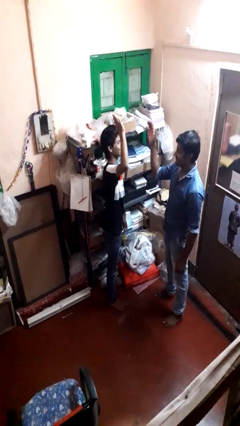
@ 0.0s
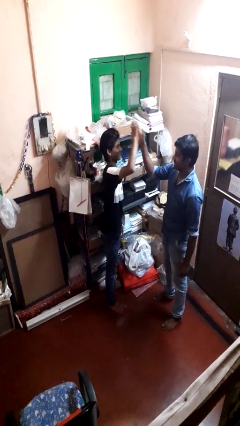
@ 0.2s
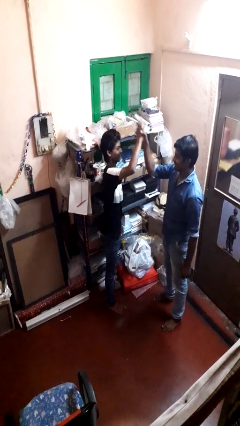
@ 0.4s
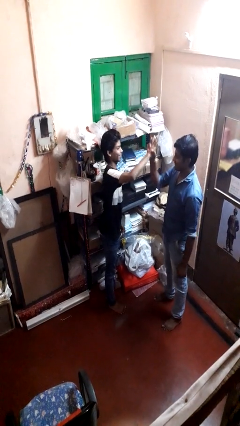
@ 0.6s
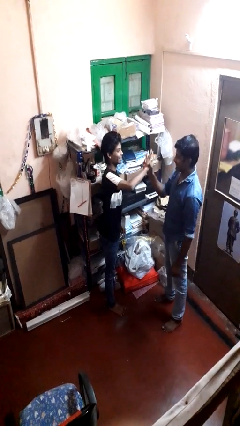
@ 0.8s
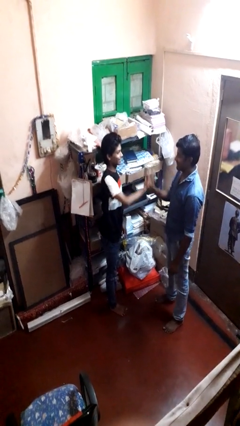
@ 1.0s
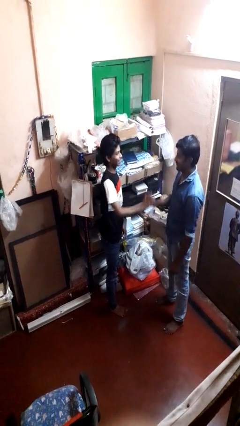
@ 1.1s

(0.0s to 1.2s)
person highfives hand

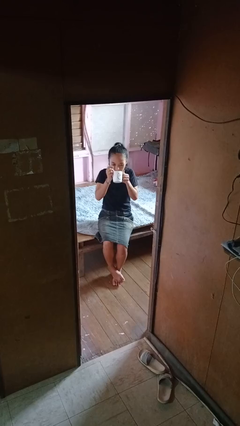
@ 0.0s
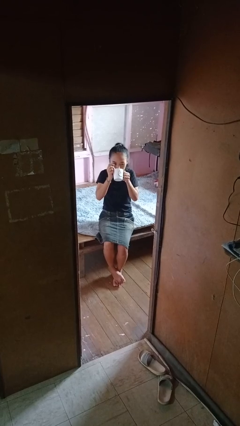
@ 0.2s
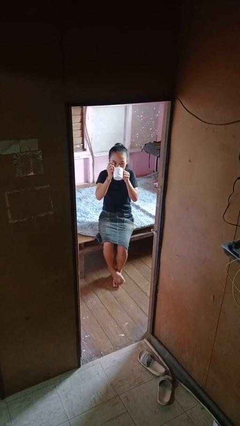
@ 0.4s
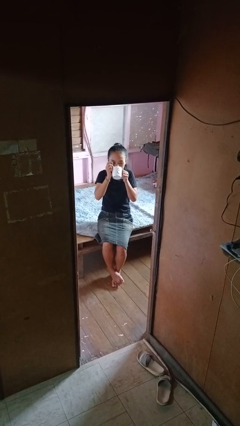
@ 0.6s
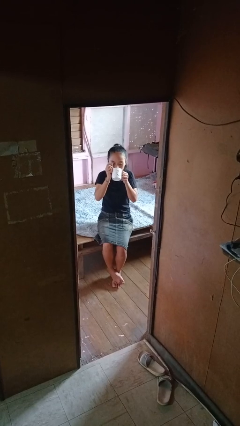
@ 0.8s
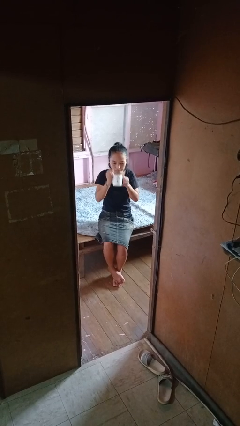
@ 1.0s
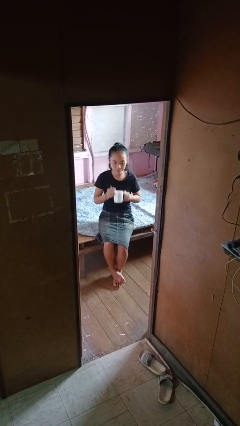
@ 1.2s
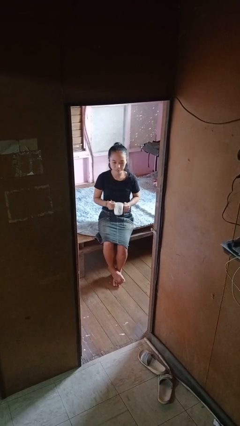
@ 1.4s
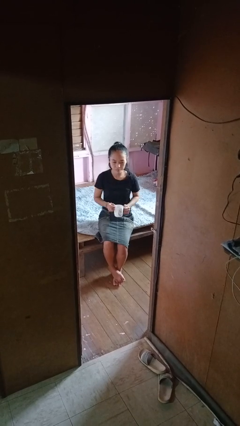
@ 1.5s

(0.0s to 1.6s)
person drinks from mug

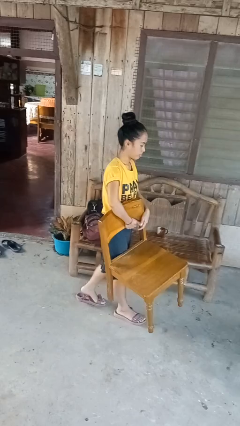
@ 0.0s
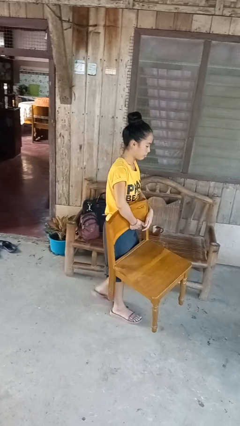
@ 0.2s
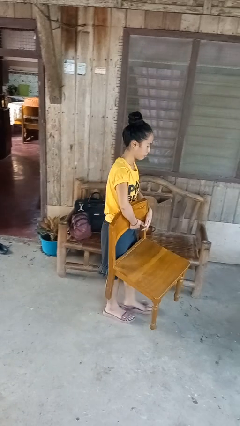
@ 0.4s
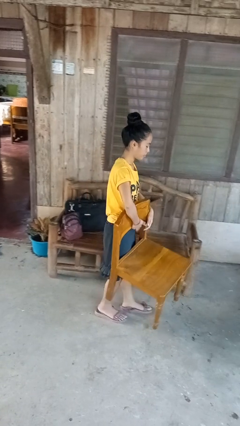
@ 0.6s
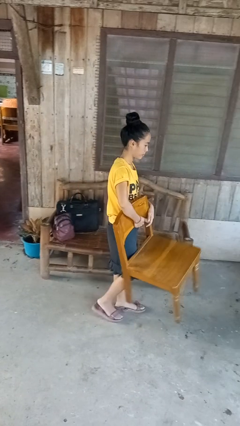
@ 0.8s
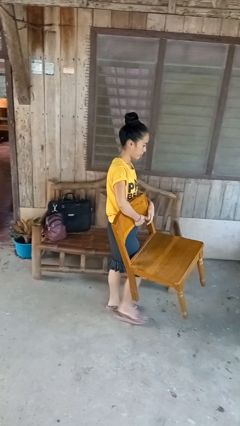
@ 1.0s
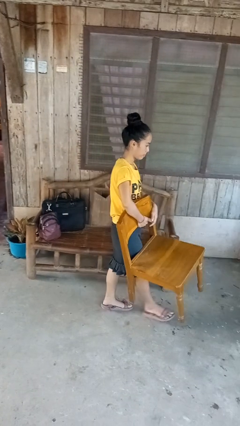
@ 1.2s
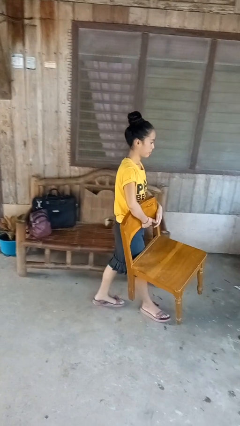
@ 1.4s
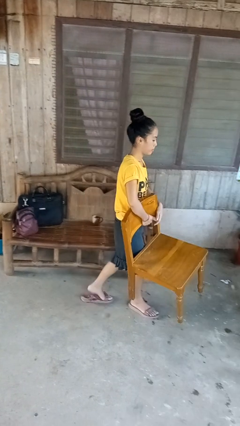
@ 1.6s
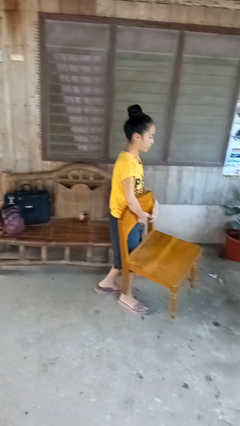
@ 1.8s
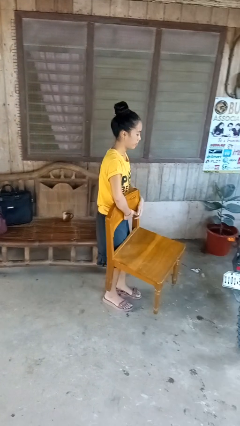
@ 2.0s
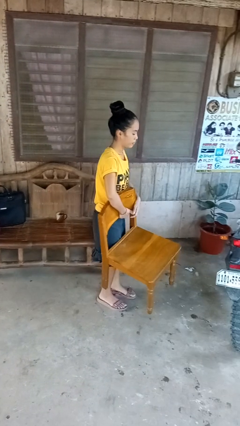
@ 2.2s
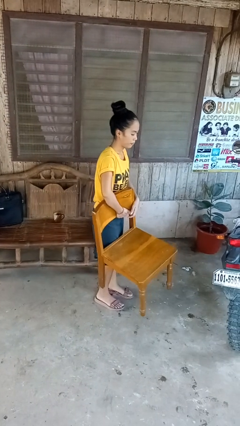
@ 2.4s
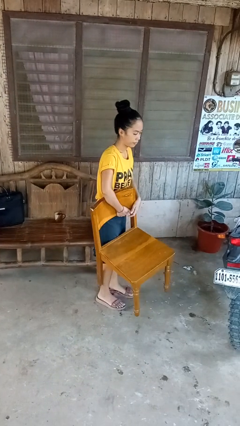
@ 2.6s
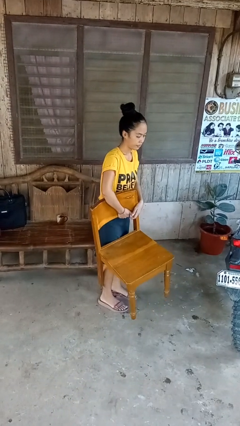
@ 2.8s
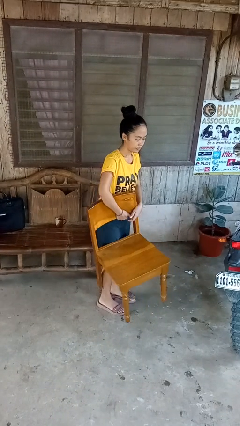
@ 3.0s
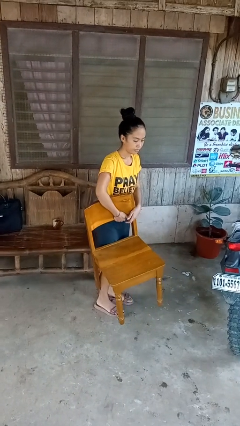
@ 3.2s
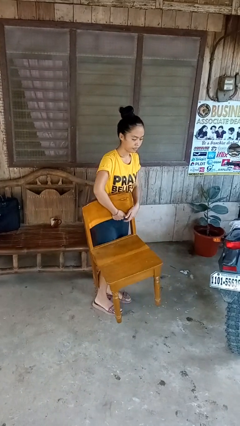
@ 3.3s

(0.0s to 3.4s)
person carries furniture

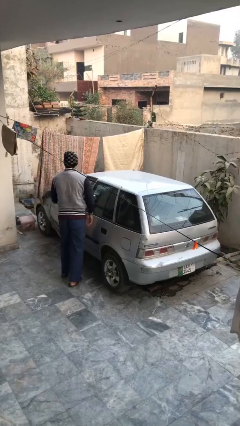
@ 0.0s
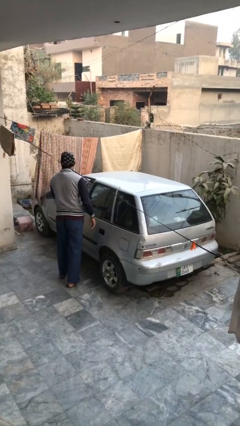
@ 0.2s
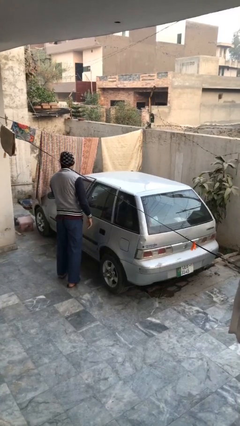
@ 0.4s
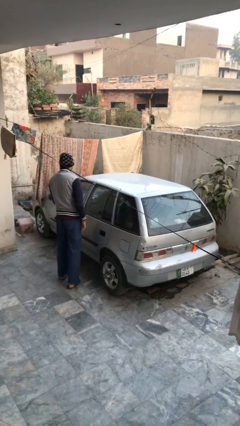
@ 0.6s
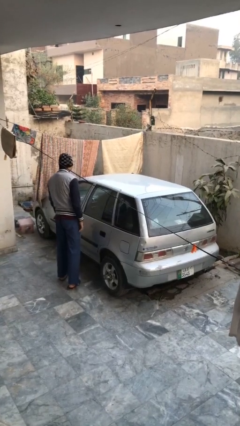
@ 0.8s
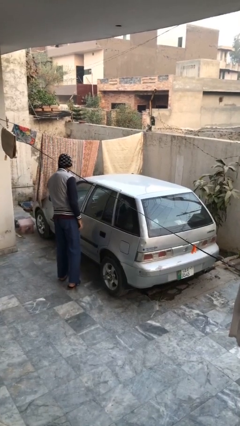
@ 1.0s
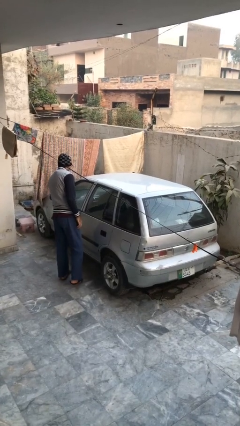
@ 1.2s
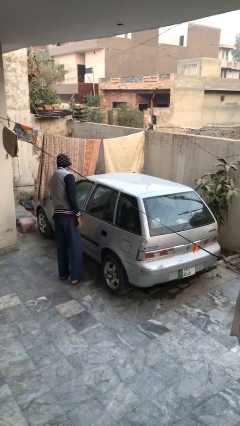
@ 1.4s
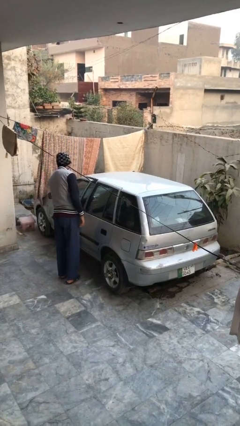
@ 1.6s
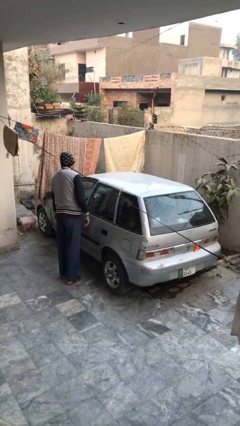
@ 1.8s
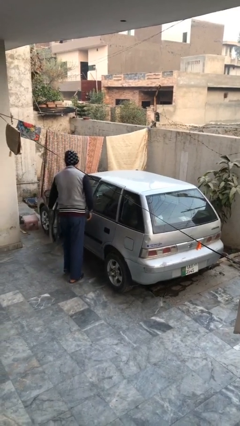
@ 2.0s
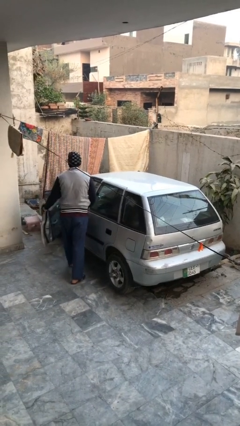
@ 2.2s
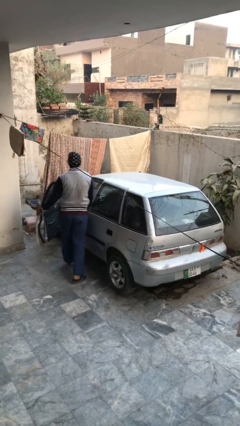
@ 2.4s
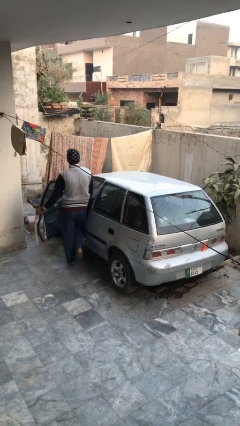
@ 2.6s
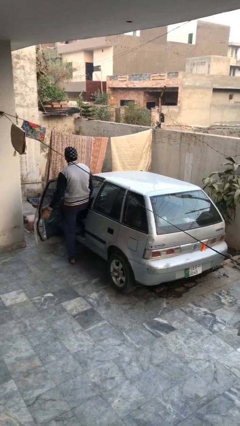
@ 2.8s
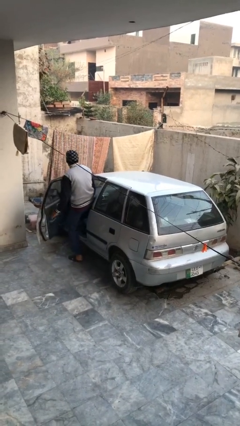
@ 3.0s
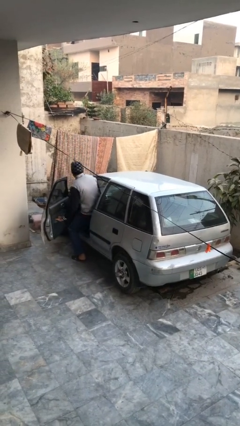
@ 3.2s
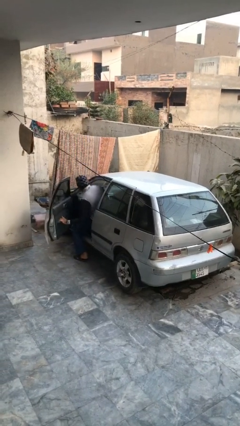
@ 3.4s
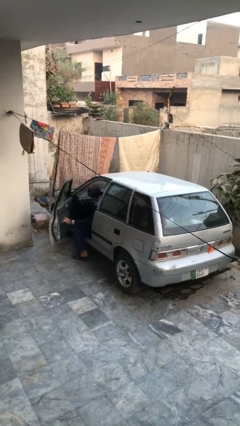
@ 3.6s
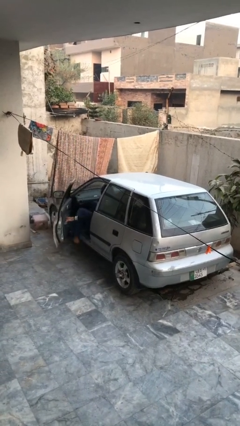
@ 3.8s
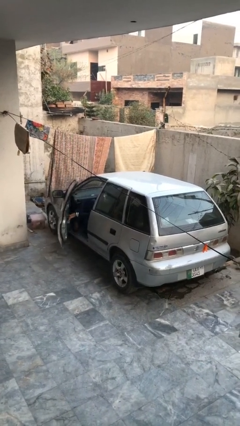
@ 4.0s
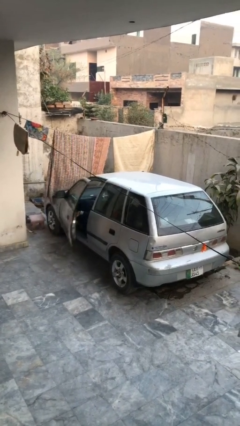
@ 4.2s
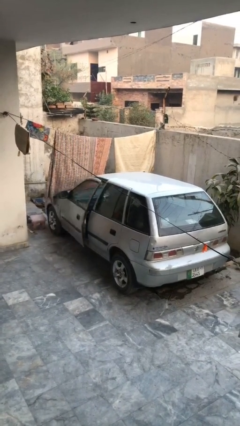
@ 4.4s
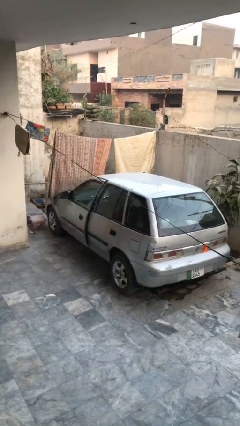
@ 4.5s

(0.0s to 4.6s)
car picks up person

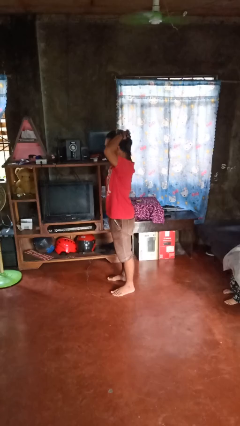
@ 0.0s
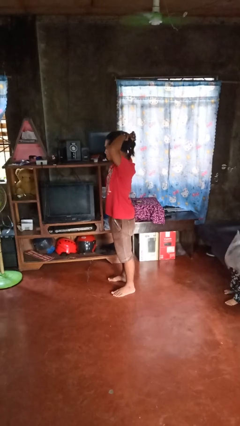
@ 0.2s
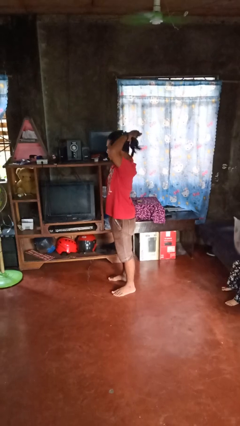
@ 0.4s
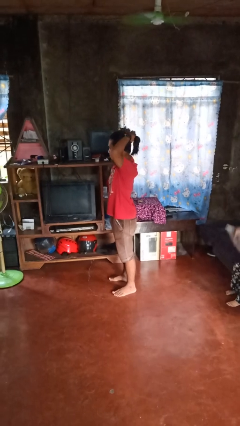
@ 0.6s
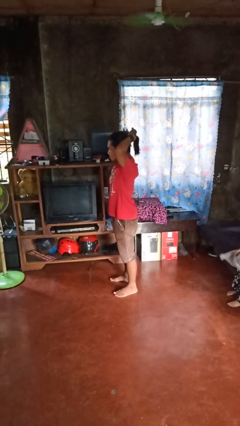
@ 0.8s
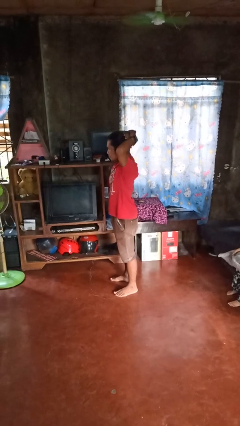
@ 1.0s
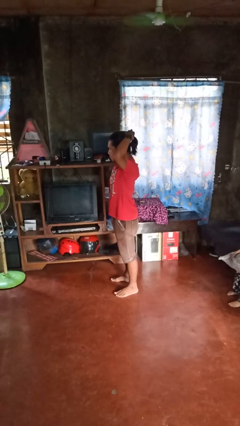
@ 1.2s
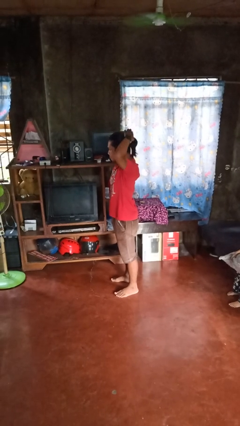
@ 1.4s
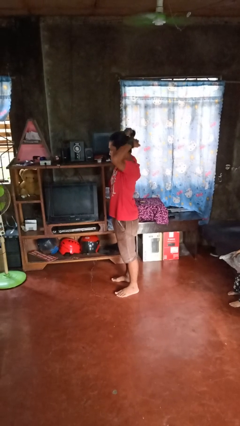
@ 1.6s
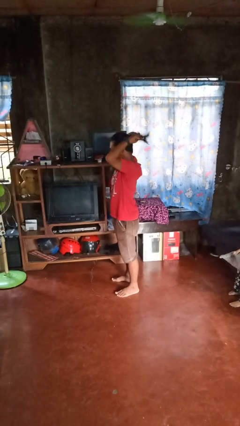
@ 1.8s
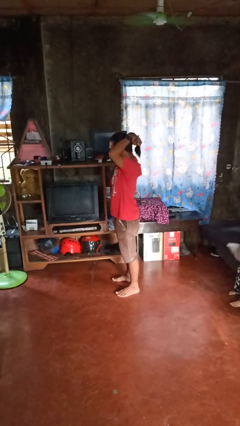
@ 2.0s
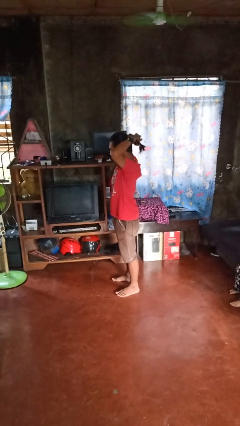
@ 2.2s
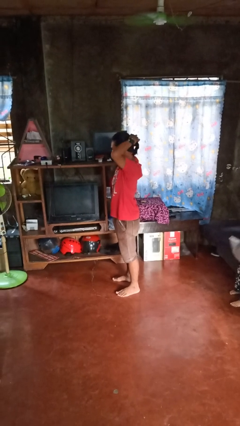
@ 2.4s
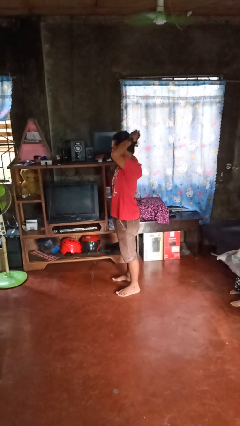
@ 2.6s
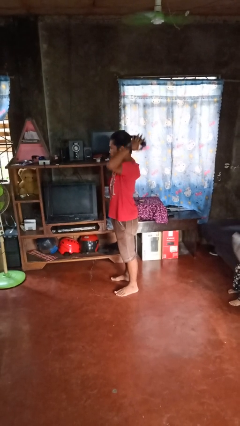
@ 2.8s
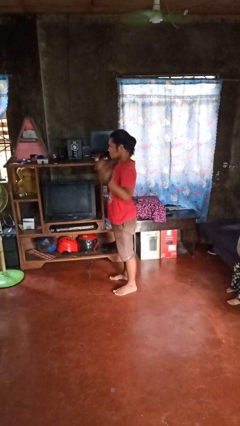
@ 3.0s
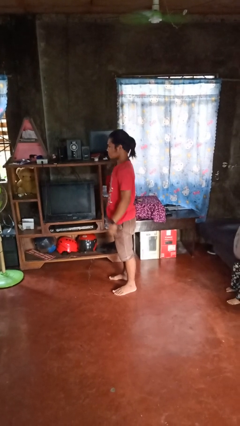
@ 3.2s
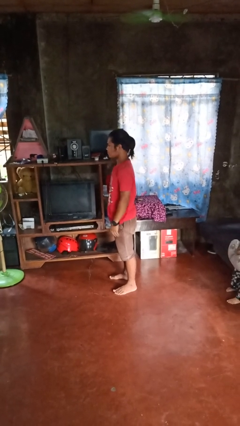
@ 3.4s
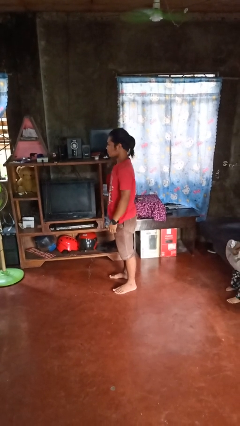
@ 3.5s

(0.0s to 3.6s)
person puts hair in ponytail

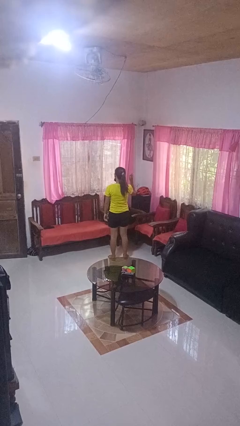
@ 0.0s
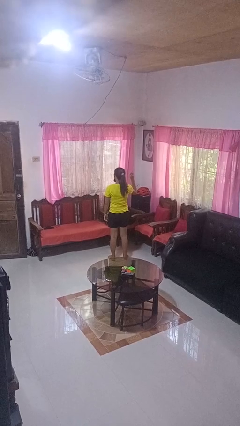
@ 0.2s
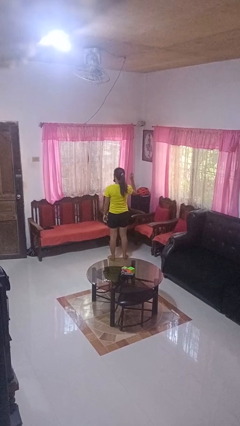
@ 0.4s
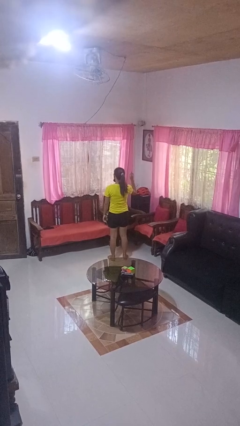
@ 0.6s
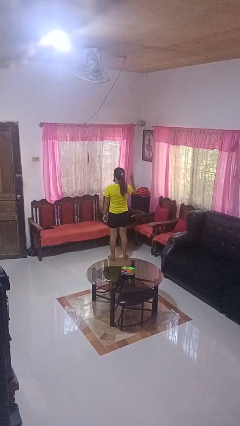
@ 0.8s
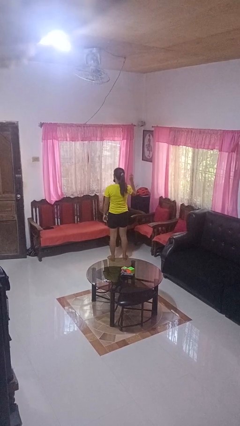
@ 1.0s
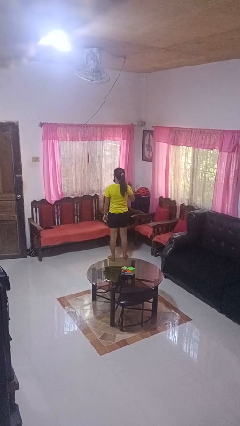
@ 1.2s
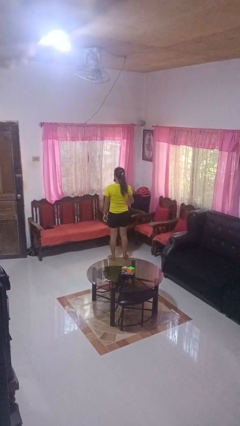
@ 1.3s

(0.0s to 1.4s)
person gestures number one

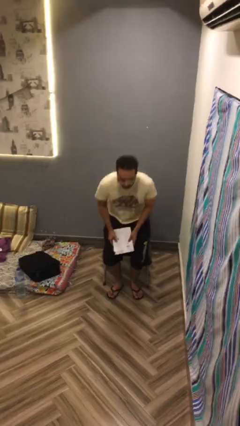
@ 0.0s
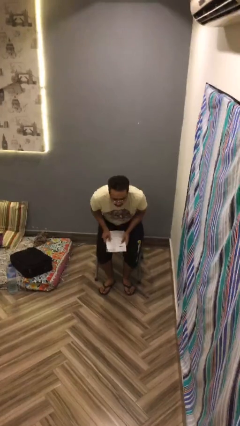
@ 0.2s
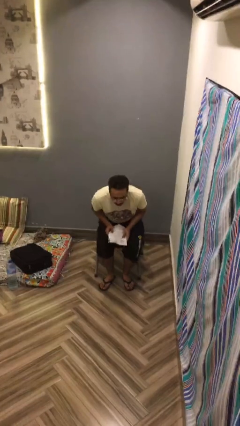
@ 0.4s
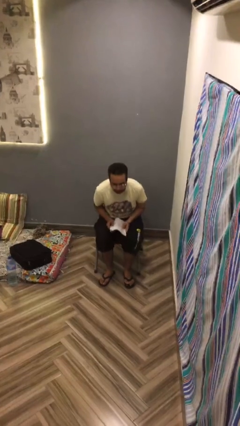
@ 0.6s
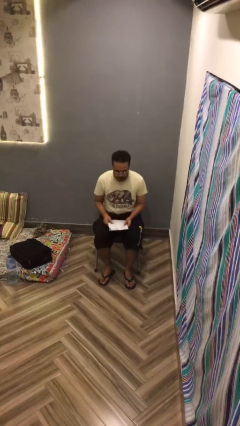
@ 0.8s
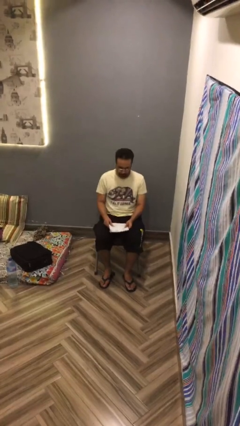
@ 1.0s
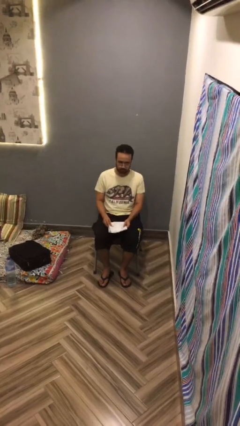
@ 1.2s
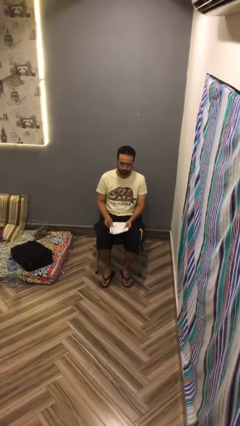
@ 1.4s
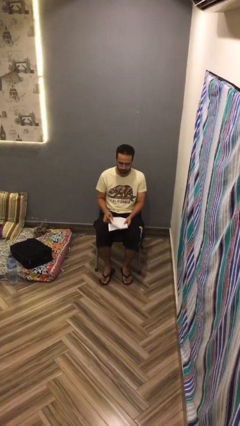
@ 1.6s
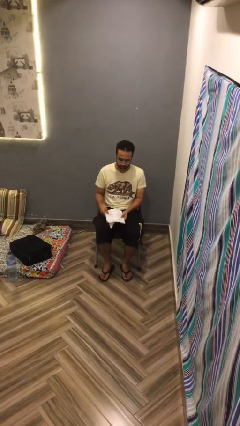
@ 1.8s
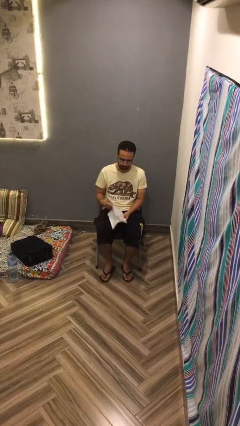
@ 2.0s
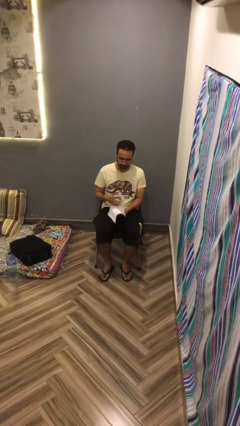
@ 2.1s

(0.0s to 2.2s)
person sits down
